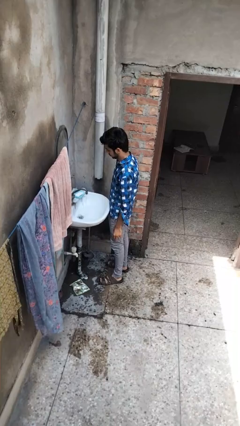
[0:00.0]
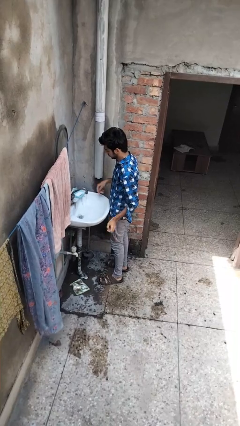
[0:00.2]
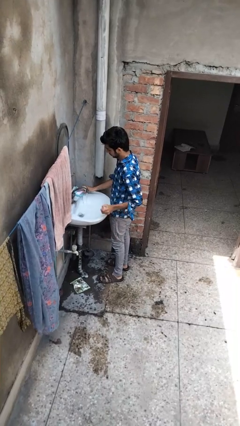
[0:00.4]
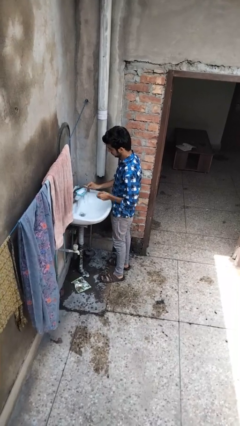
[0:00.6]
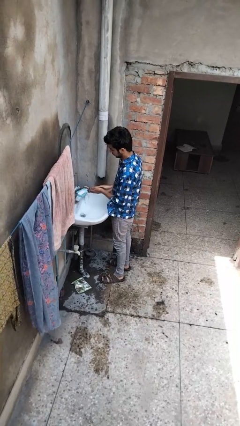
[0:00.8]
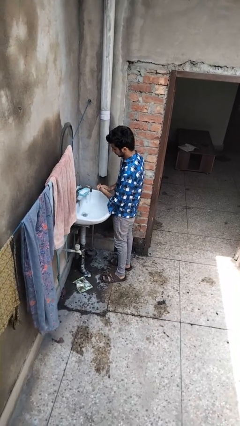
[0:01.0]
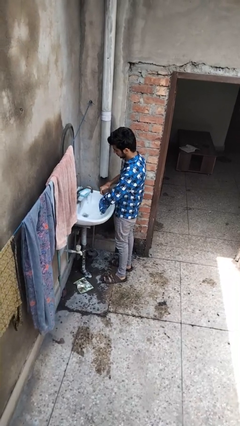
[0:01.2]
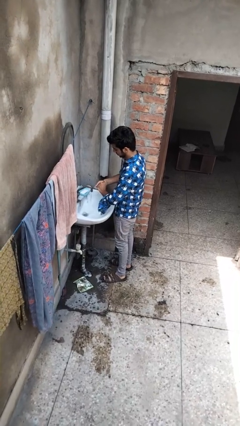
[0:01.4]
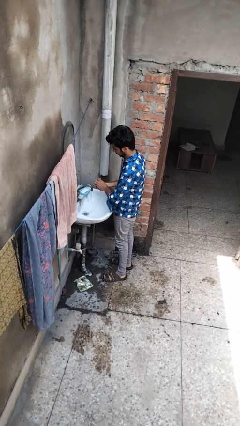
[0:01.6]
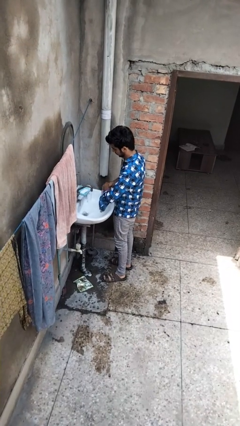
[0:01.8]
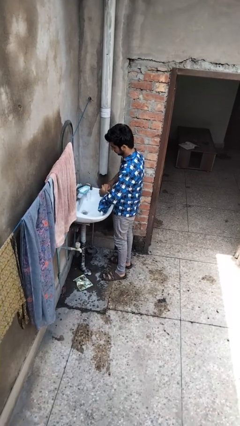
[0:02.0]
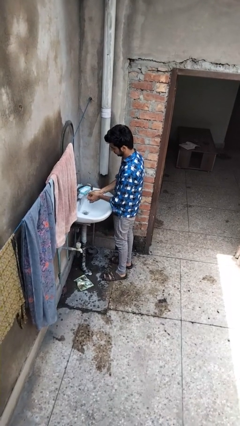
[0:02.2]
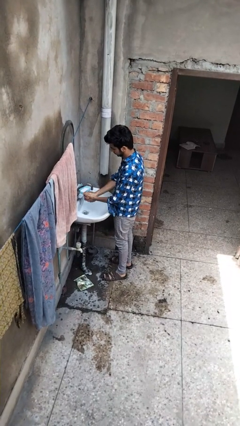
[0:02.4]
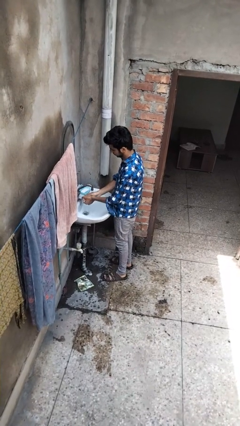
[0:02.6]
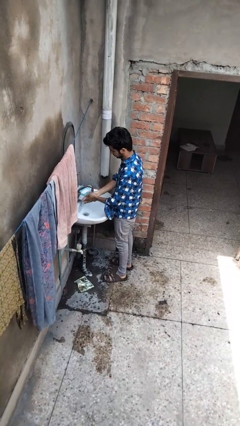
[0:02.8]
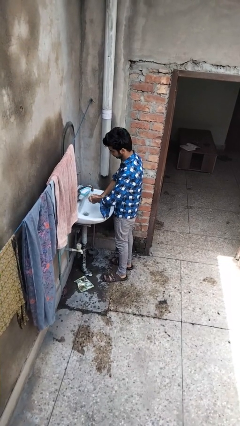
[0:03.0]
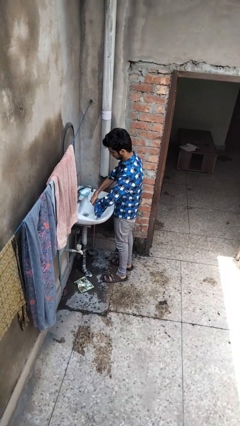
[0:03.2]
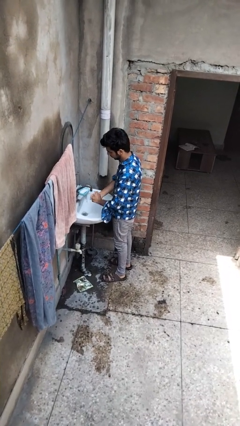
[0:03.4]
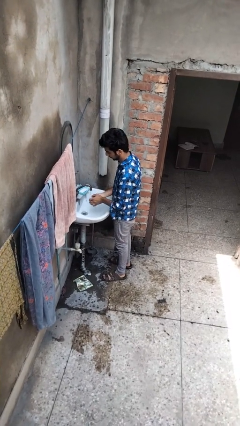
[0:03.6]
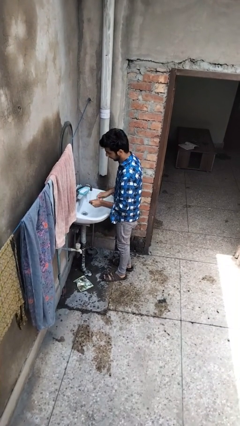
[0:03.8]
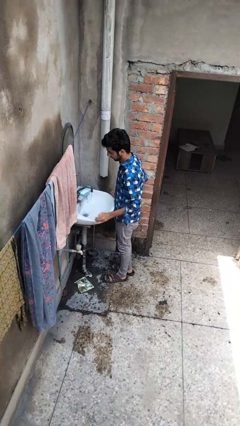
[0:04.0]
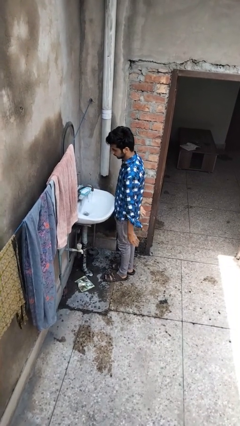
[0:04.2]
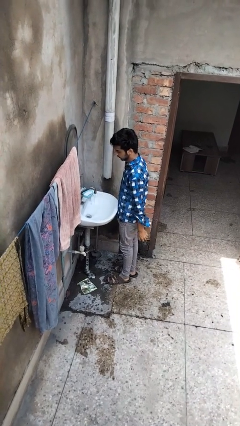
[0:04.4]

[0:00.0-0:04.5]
person washes hands

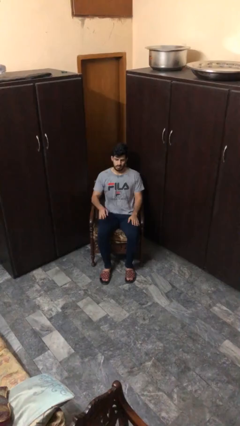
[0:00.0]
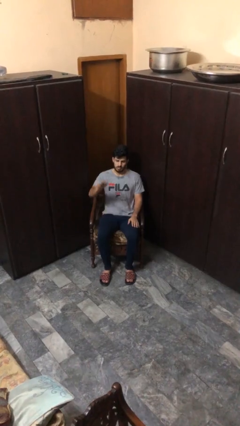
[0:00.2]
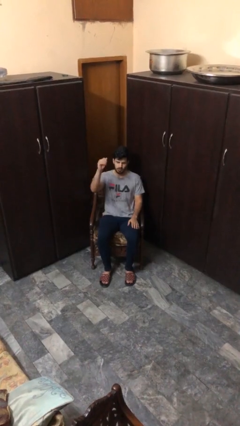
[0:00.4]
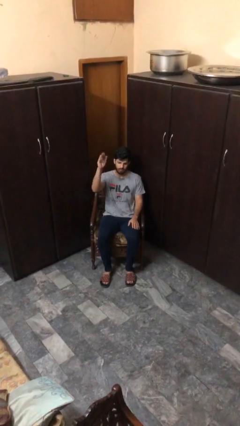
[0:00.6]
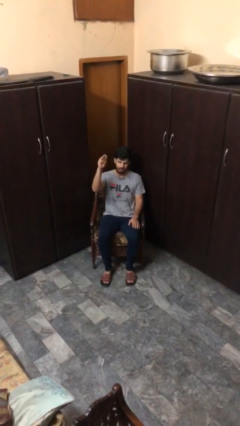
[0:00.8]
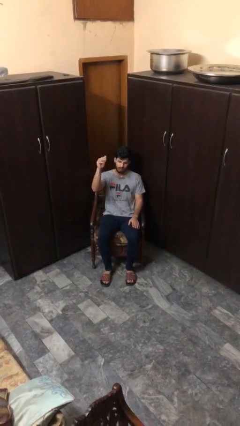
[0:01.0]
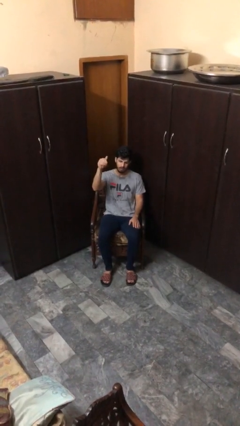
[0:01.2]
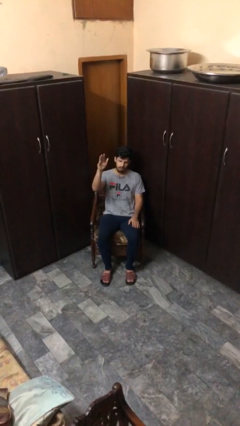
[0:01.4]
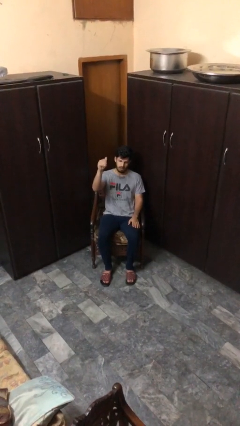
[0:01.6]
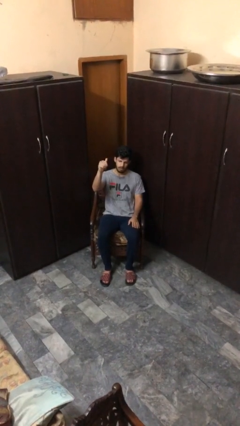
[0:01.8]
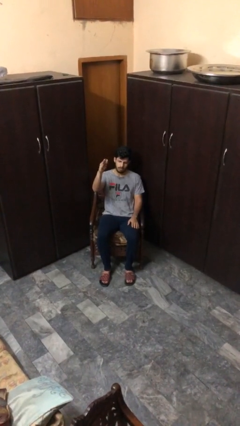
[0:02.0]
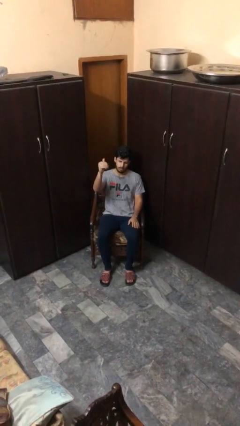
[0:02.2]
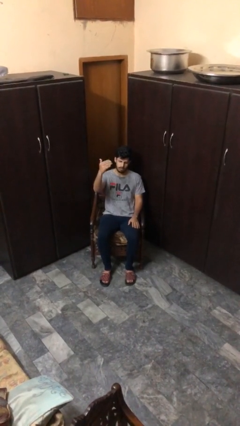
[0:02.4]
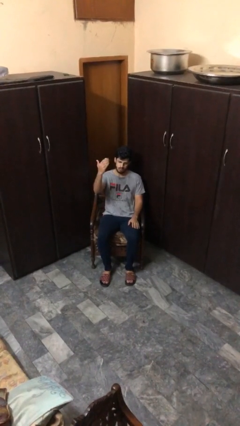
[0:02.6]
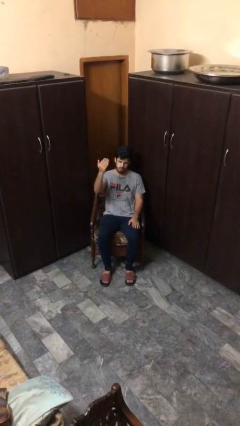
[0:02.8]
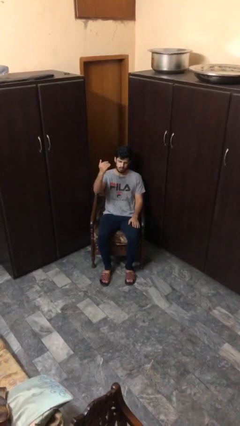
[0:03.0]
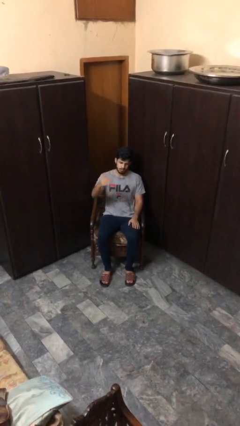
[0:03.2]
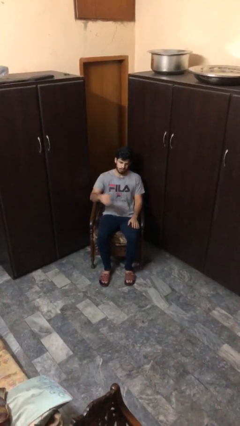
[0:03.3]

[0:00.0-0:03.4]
person gestures come here

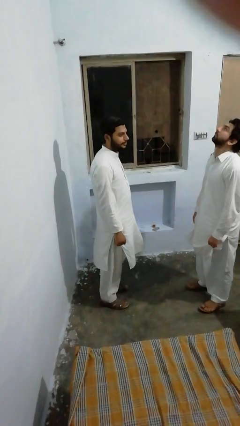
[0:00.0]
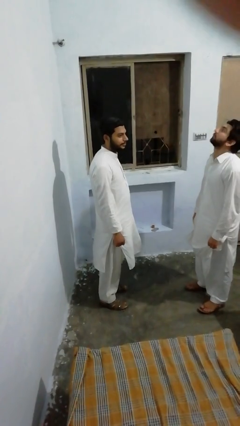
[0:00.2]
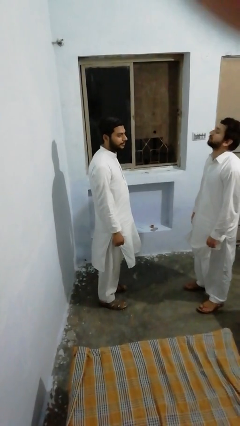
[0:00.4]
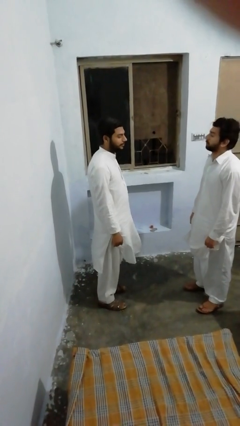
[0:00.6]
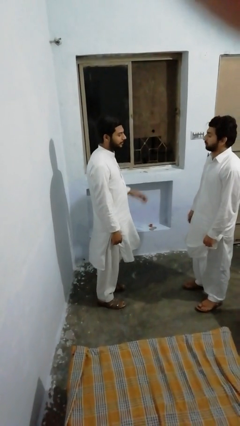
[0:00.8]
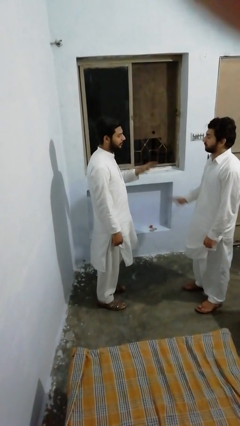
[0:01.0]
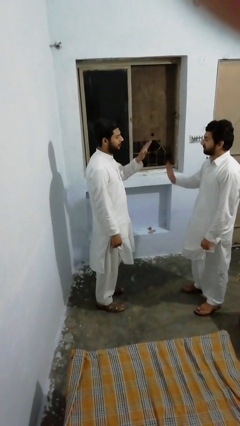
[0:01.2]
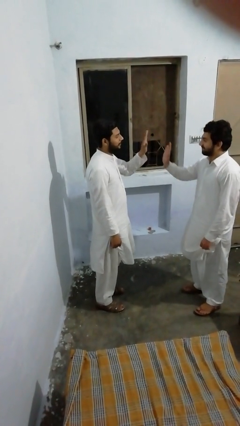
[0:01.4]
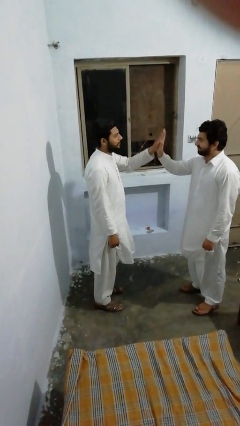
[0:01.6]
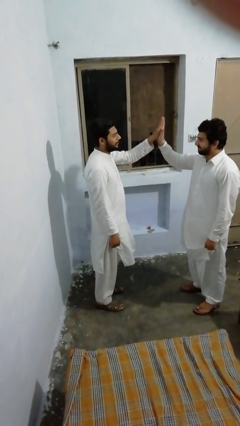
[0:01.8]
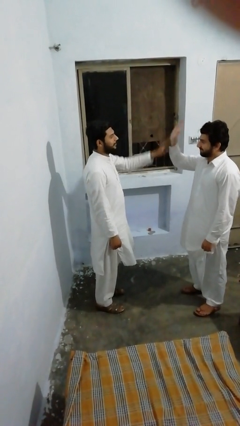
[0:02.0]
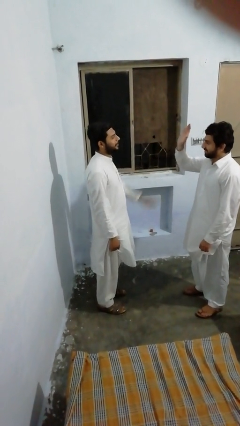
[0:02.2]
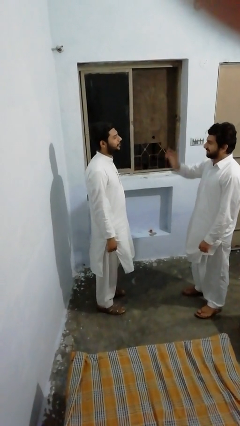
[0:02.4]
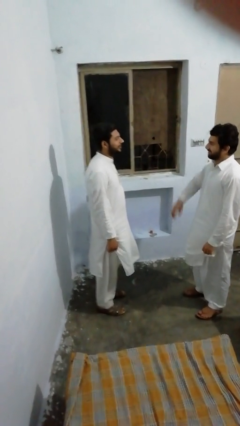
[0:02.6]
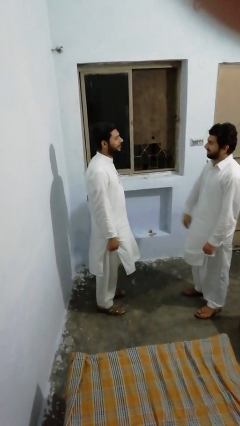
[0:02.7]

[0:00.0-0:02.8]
person highfives hand

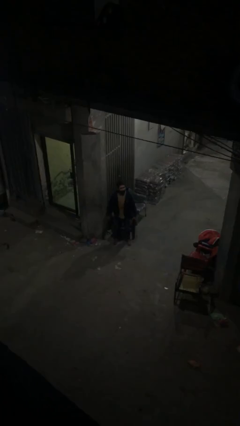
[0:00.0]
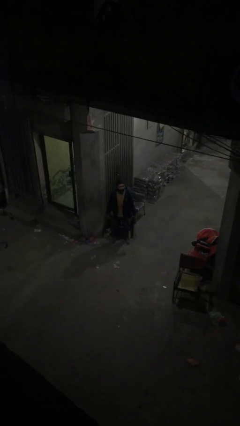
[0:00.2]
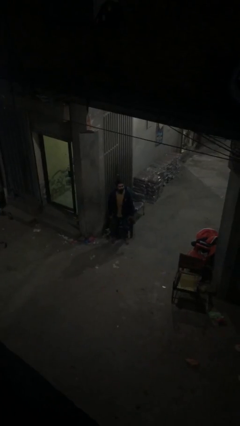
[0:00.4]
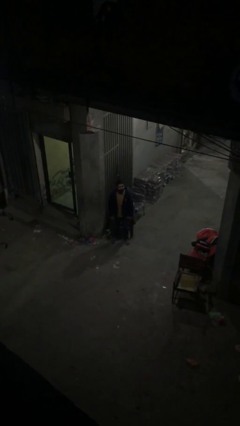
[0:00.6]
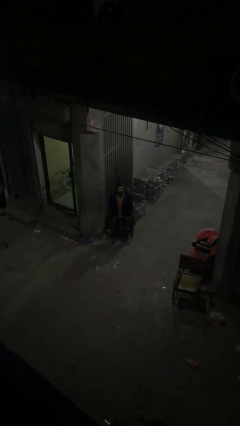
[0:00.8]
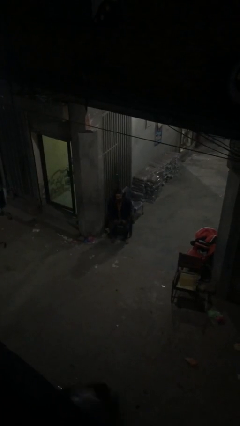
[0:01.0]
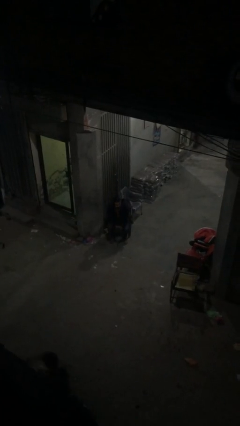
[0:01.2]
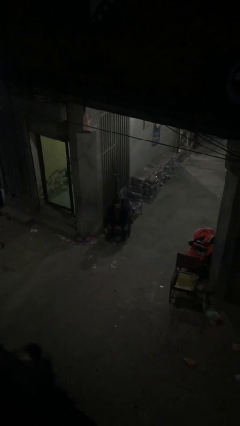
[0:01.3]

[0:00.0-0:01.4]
person sits down

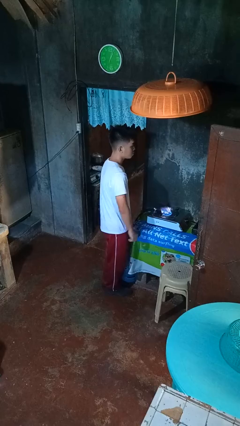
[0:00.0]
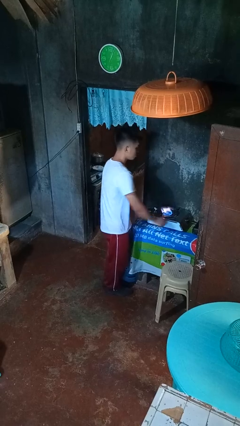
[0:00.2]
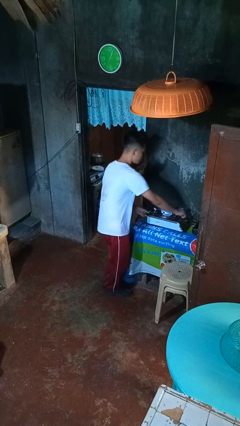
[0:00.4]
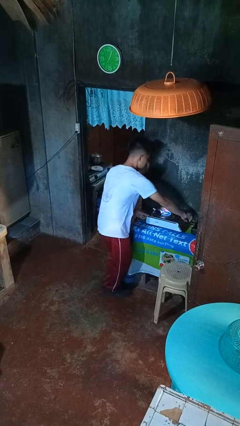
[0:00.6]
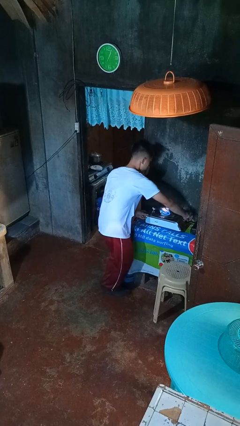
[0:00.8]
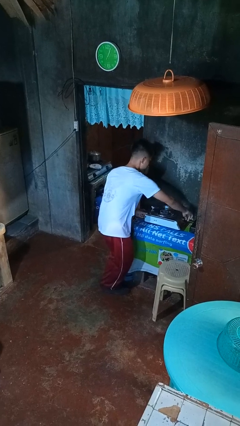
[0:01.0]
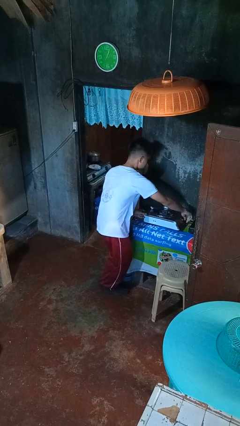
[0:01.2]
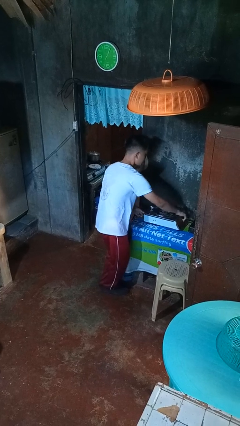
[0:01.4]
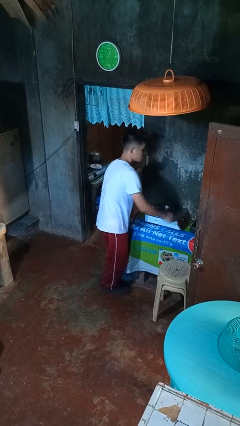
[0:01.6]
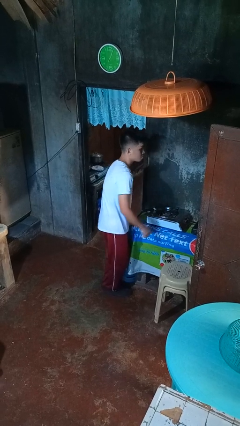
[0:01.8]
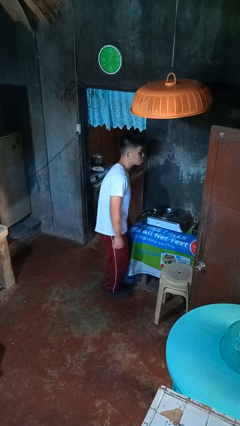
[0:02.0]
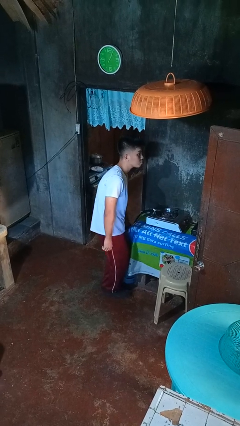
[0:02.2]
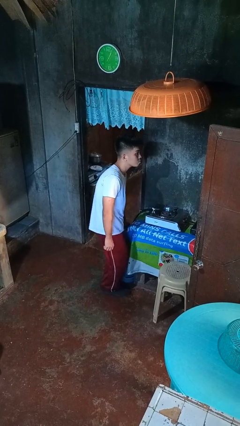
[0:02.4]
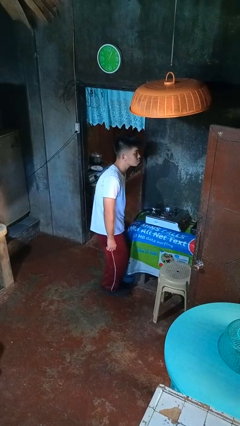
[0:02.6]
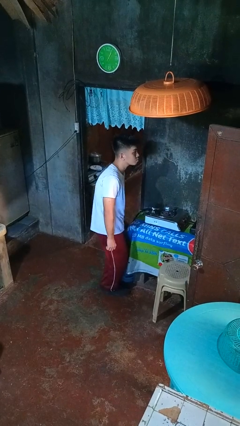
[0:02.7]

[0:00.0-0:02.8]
person turns off stovetop

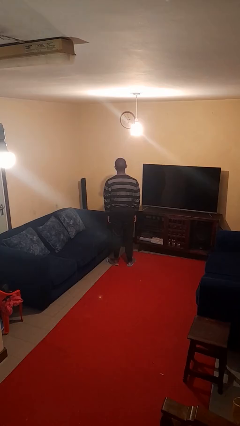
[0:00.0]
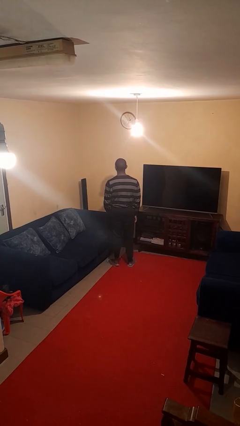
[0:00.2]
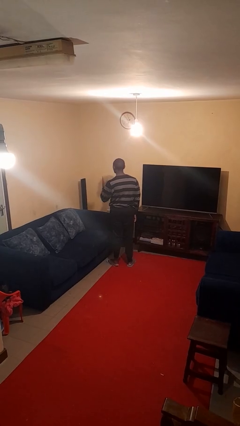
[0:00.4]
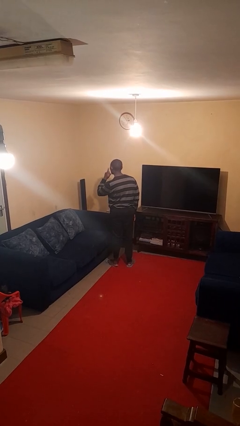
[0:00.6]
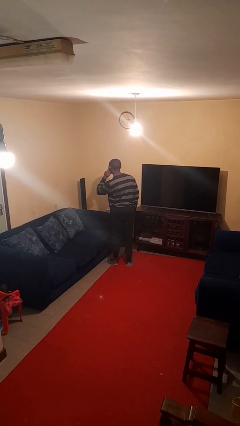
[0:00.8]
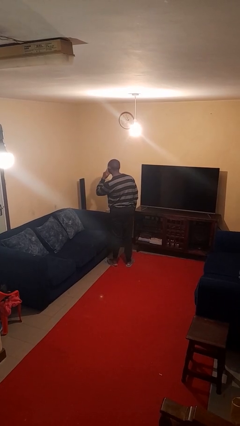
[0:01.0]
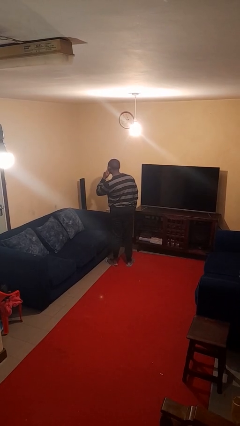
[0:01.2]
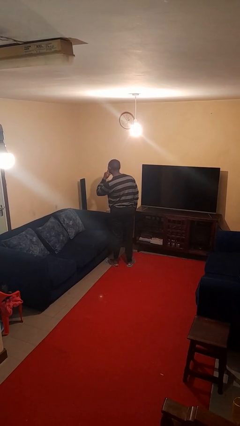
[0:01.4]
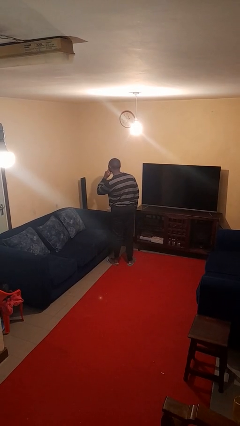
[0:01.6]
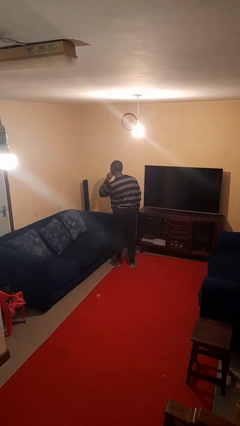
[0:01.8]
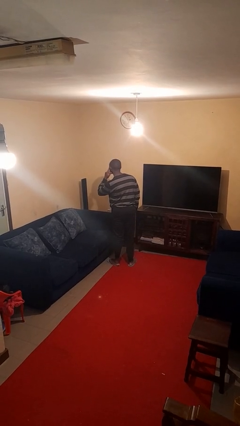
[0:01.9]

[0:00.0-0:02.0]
person gestures listen closely

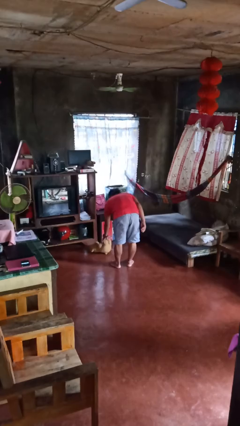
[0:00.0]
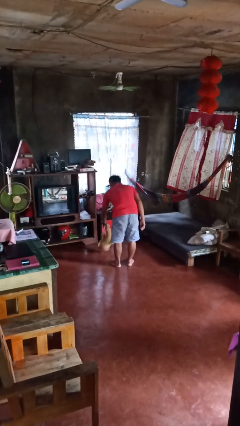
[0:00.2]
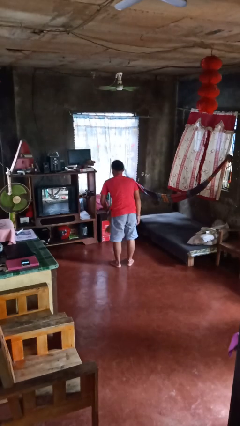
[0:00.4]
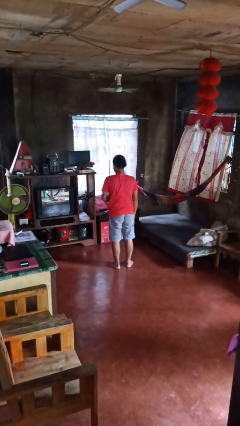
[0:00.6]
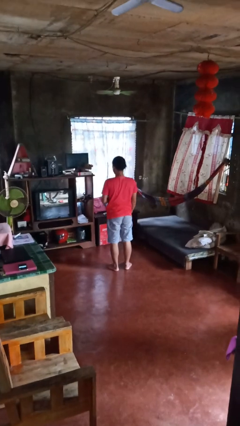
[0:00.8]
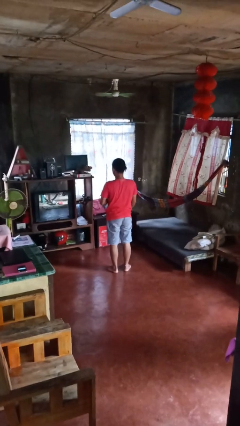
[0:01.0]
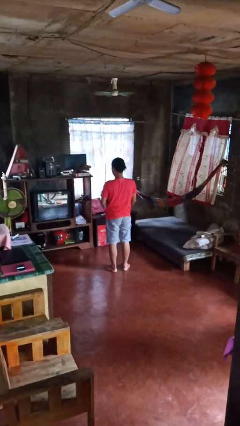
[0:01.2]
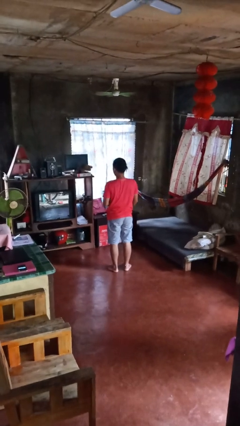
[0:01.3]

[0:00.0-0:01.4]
person picks up object from floor
